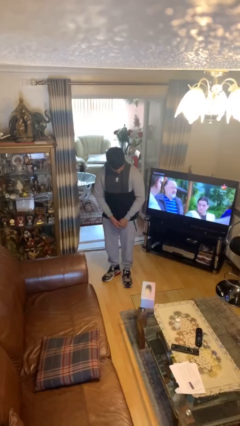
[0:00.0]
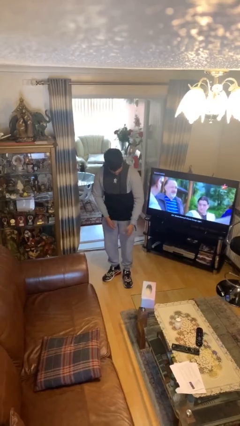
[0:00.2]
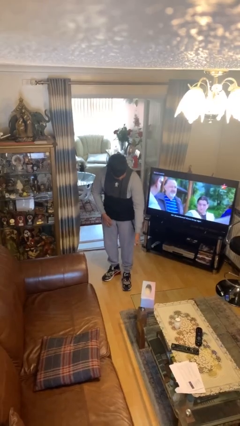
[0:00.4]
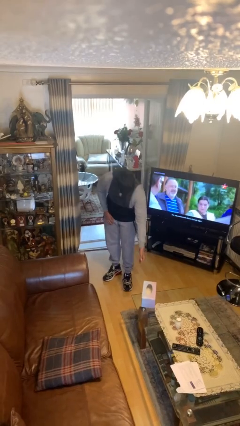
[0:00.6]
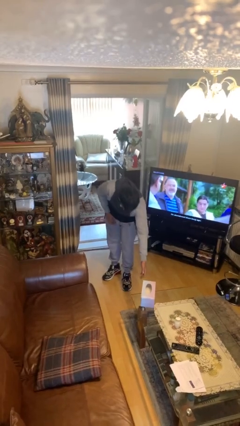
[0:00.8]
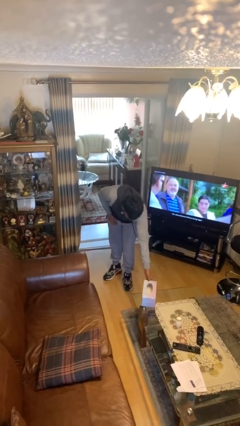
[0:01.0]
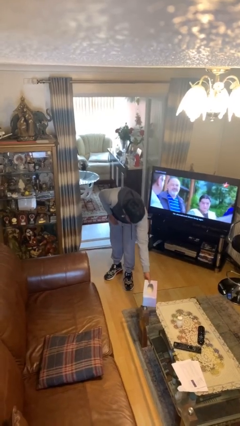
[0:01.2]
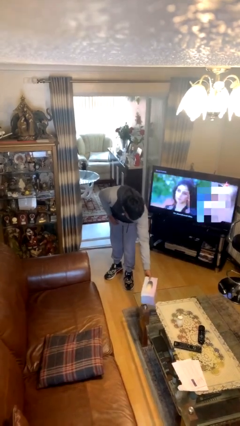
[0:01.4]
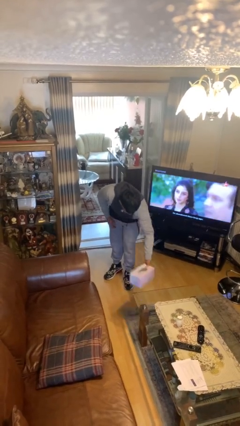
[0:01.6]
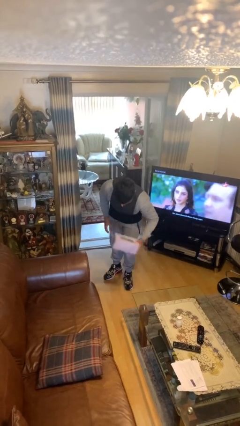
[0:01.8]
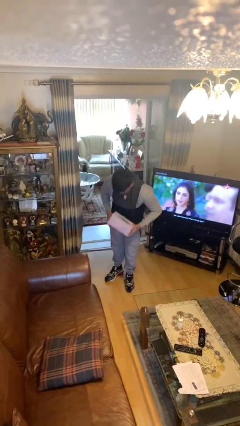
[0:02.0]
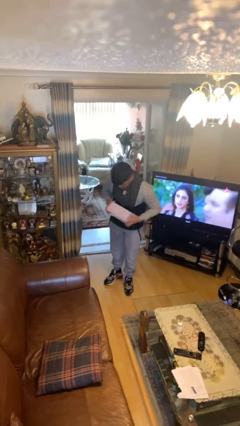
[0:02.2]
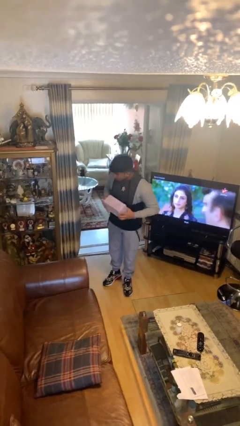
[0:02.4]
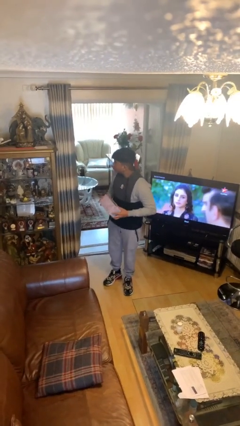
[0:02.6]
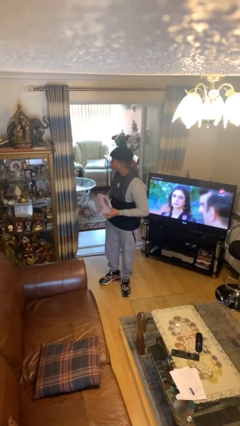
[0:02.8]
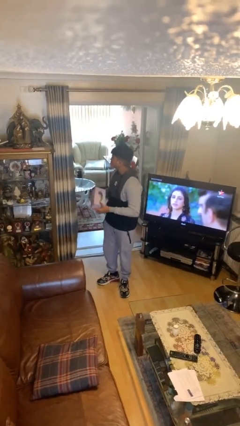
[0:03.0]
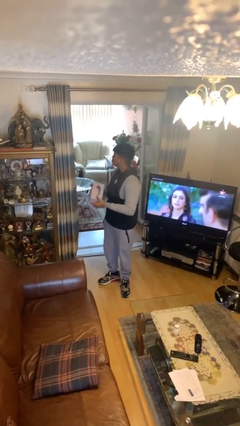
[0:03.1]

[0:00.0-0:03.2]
person picks up object from table

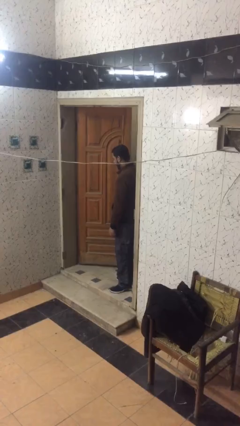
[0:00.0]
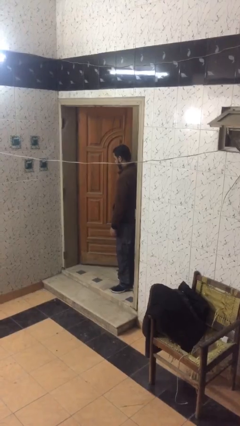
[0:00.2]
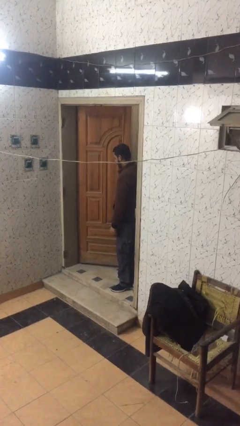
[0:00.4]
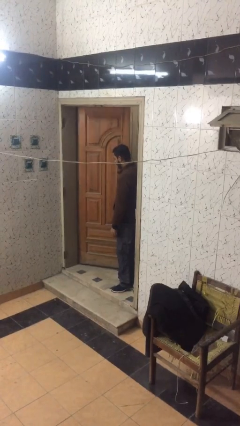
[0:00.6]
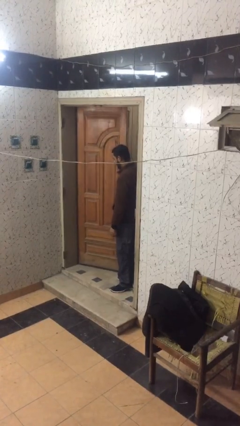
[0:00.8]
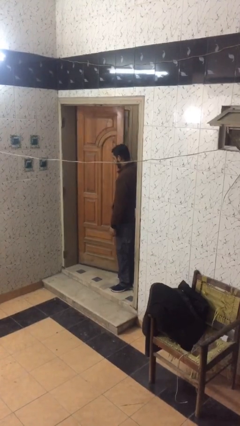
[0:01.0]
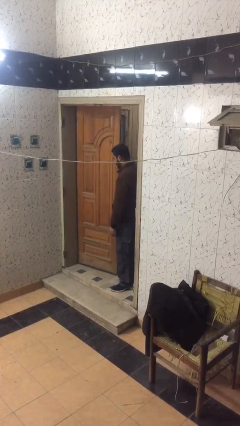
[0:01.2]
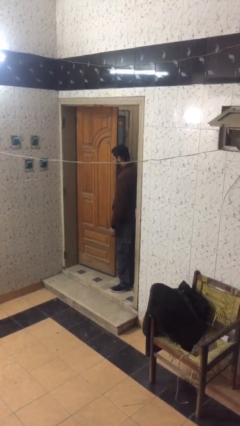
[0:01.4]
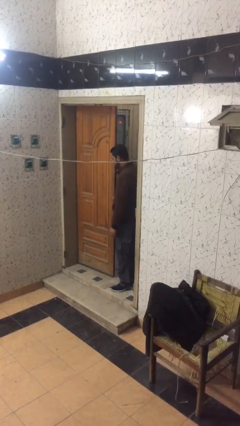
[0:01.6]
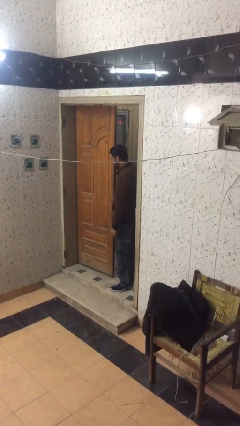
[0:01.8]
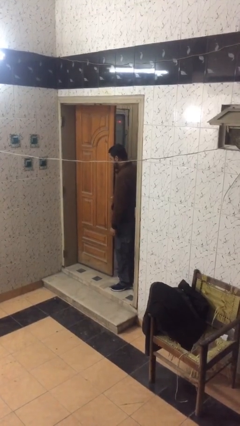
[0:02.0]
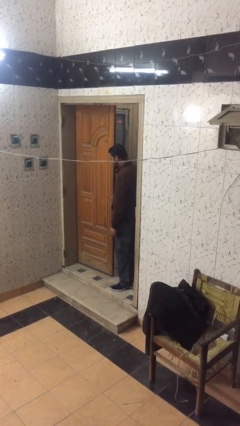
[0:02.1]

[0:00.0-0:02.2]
person closes facility door

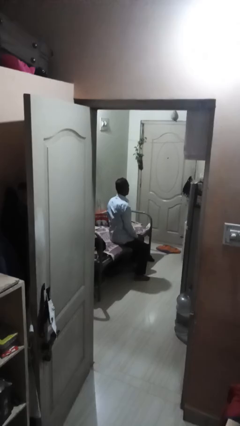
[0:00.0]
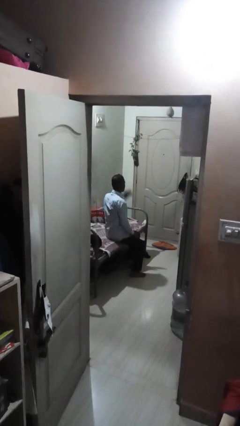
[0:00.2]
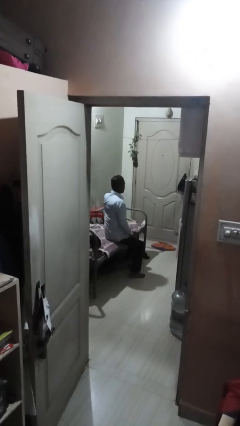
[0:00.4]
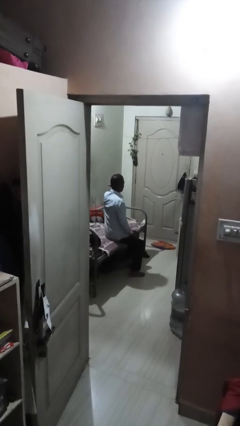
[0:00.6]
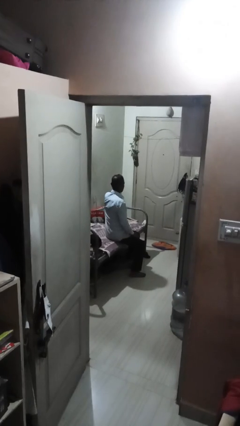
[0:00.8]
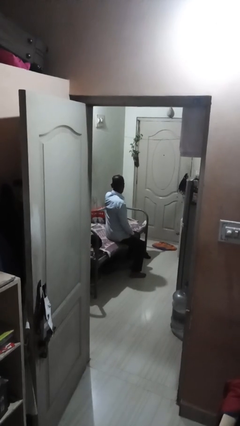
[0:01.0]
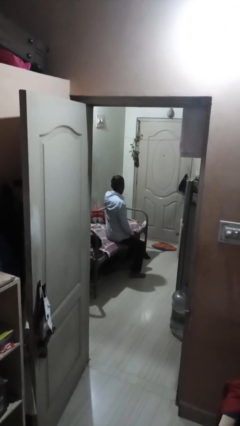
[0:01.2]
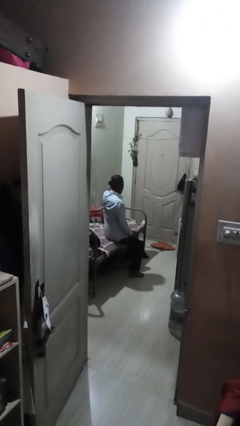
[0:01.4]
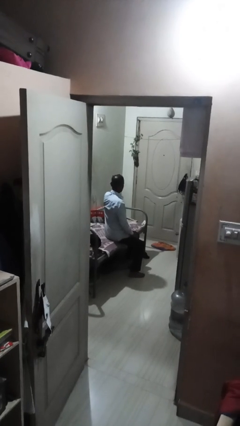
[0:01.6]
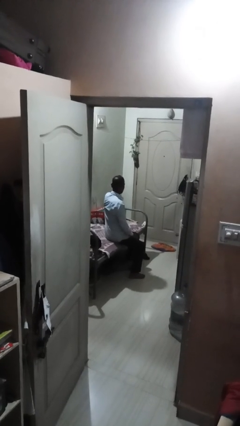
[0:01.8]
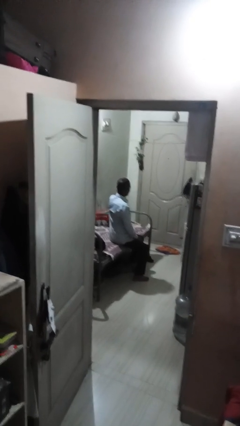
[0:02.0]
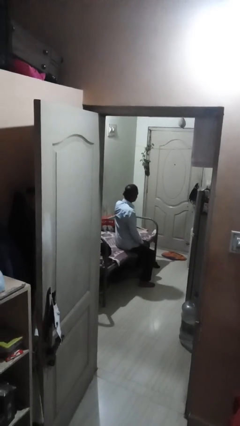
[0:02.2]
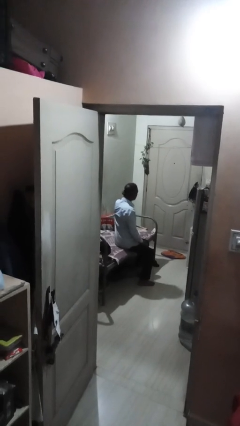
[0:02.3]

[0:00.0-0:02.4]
person strokes hair

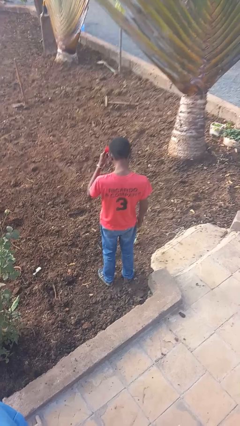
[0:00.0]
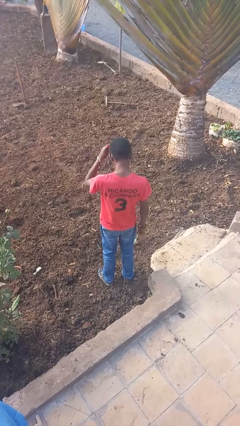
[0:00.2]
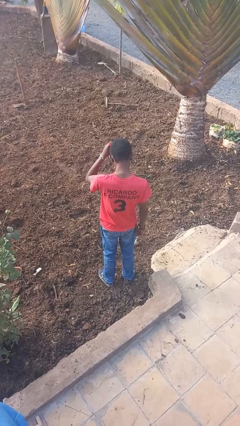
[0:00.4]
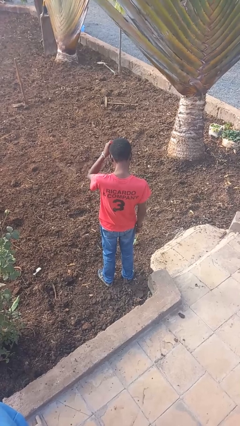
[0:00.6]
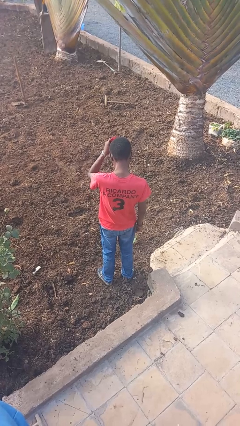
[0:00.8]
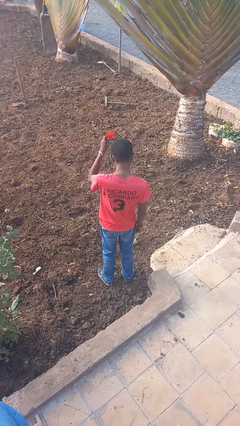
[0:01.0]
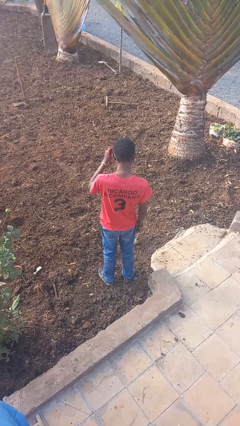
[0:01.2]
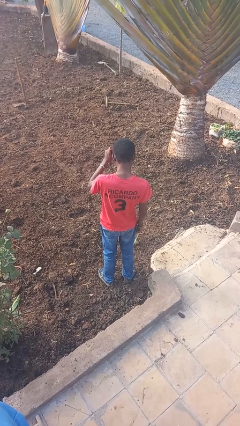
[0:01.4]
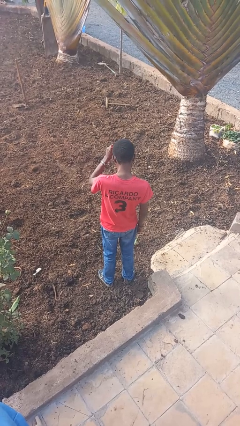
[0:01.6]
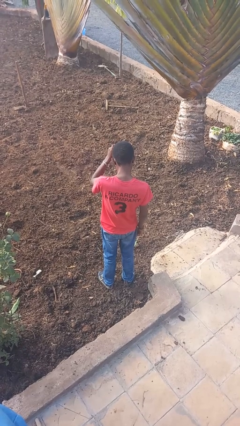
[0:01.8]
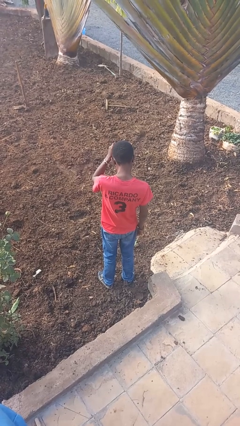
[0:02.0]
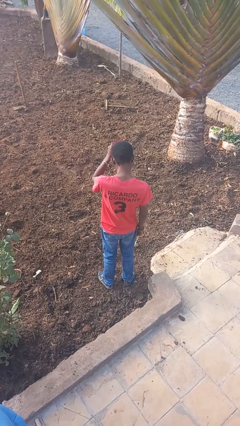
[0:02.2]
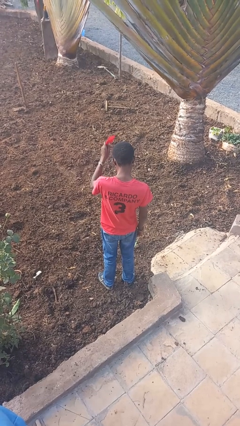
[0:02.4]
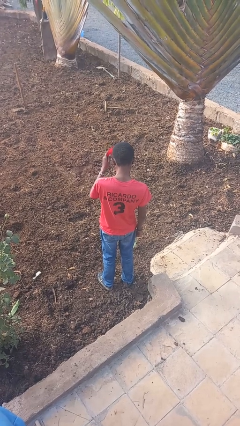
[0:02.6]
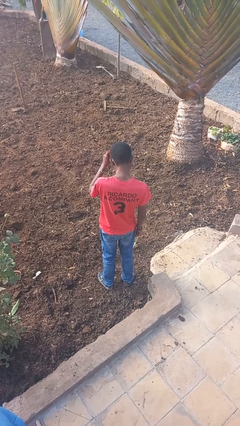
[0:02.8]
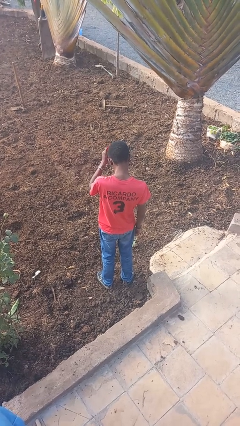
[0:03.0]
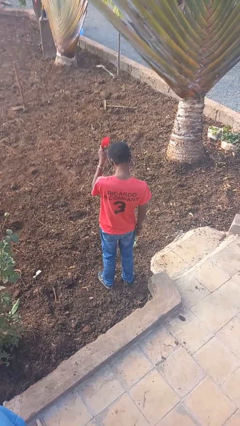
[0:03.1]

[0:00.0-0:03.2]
person brushes hair

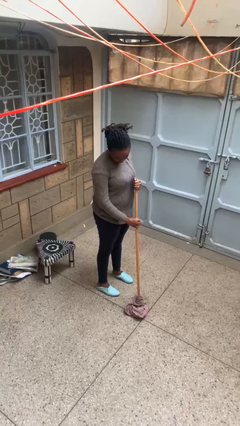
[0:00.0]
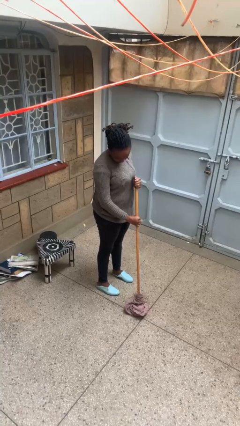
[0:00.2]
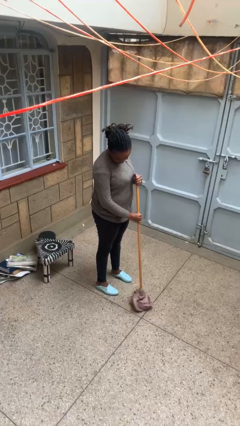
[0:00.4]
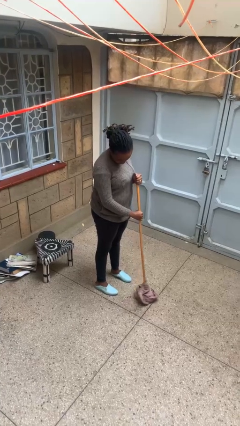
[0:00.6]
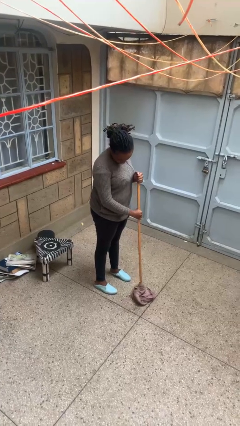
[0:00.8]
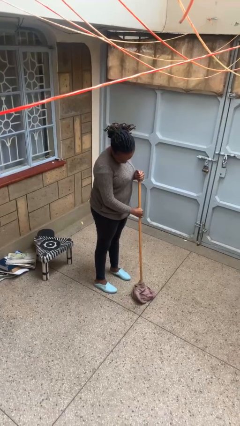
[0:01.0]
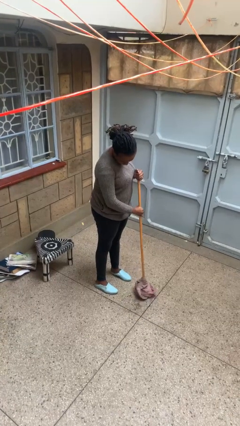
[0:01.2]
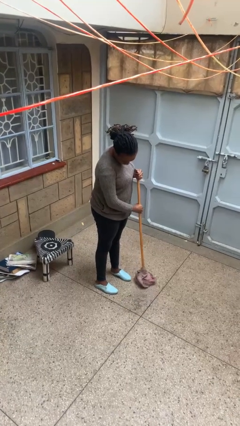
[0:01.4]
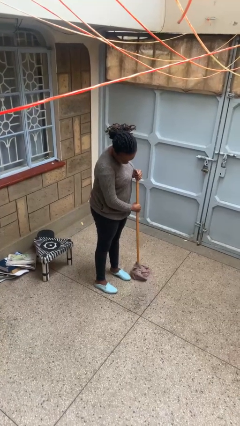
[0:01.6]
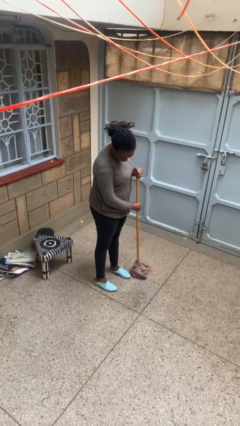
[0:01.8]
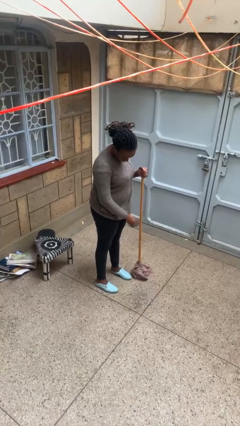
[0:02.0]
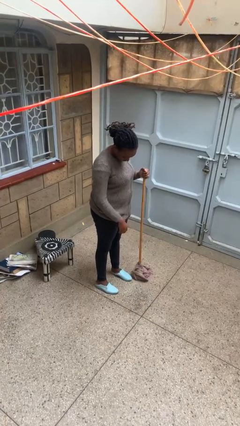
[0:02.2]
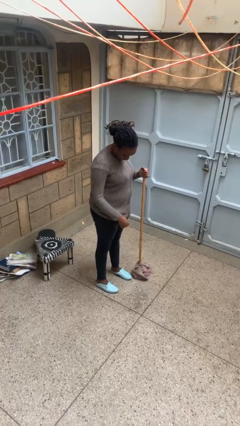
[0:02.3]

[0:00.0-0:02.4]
person mops

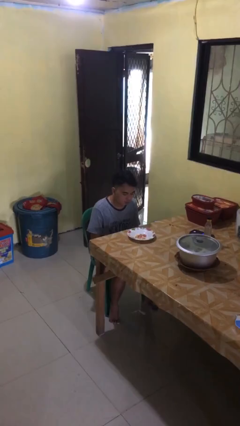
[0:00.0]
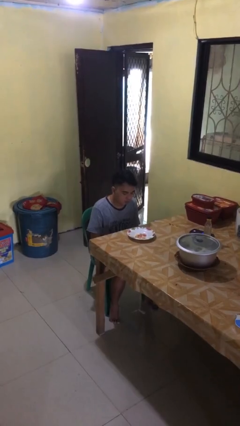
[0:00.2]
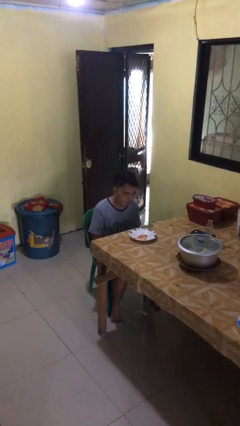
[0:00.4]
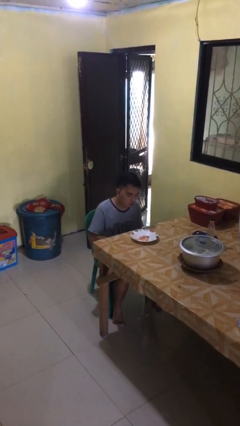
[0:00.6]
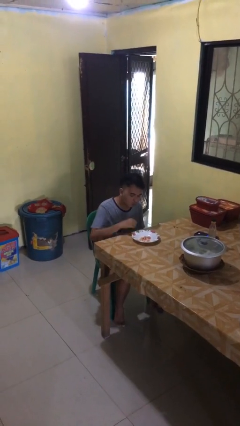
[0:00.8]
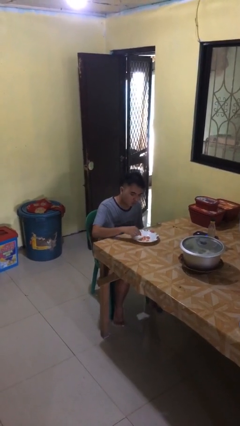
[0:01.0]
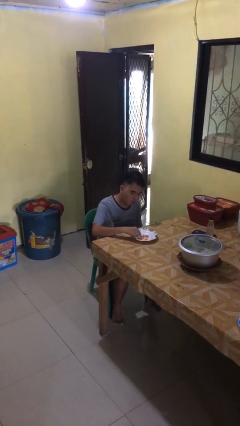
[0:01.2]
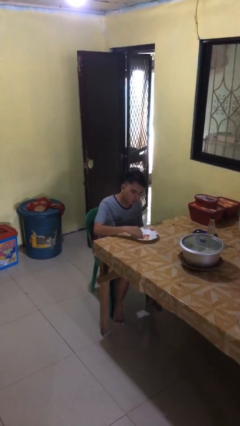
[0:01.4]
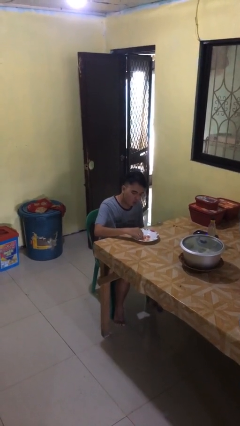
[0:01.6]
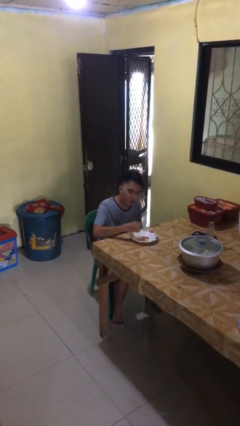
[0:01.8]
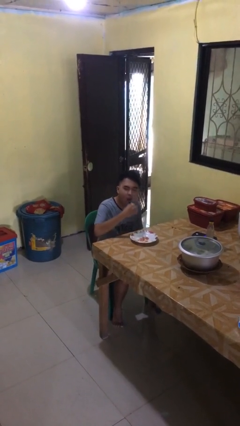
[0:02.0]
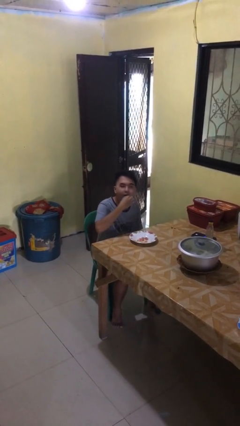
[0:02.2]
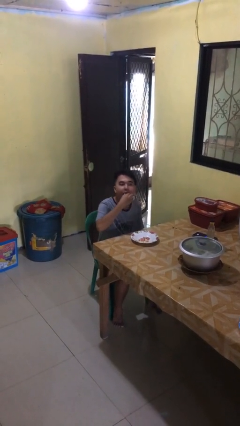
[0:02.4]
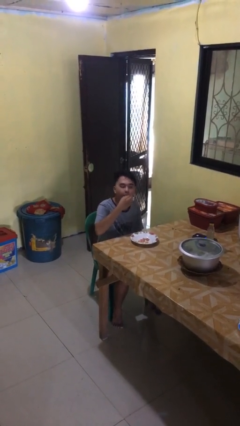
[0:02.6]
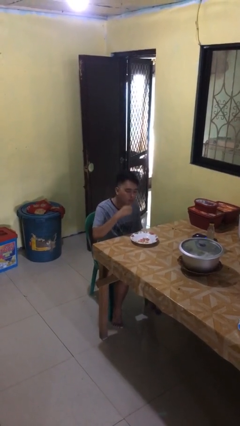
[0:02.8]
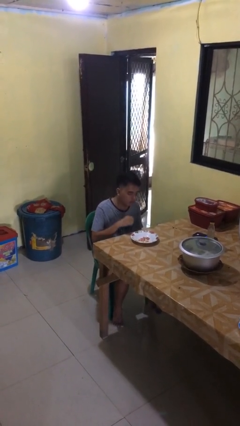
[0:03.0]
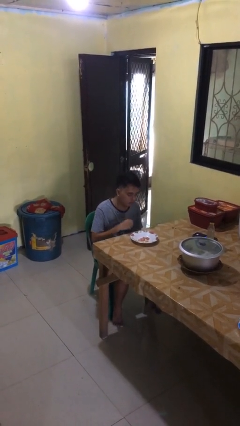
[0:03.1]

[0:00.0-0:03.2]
person eats with hands

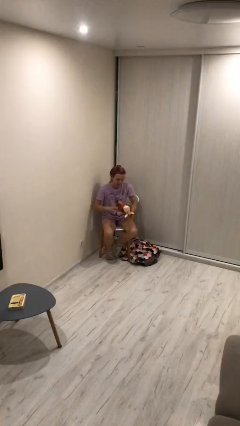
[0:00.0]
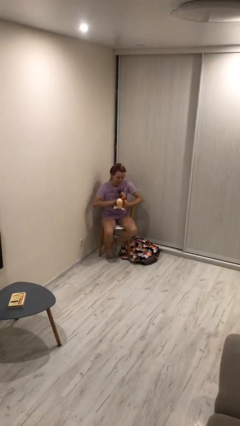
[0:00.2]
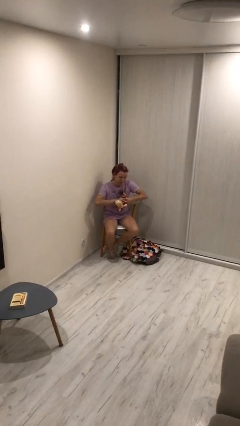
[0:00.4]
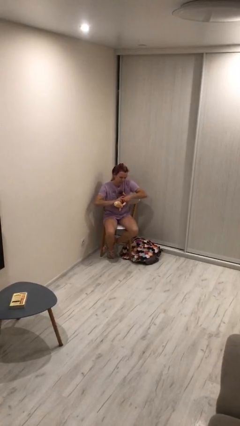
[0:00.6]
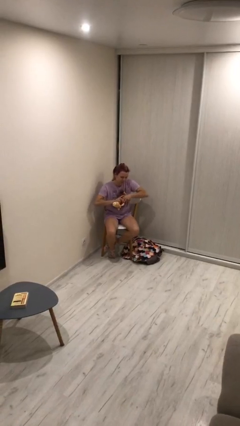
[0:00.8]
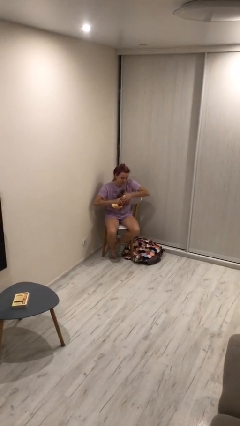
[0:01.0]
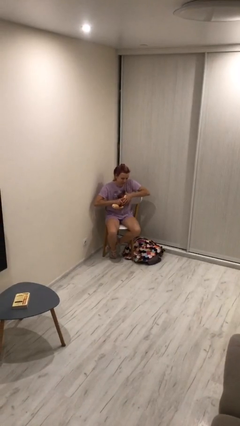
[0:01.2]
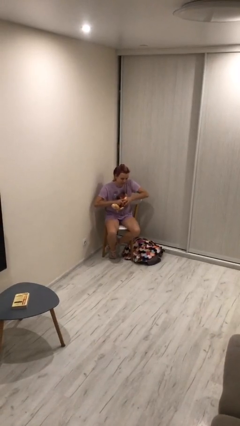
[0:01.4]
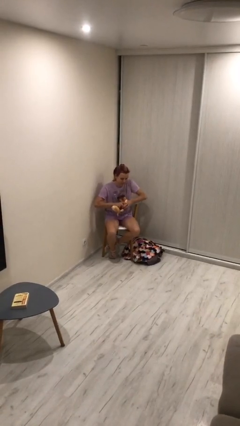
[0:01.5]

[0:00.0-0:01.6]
person squeezes object
